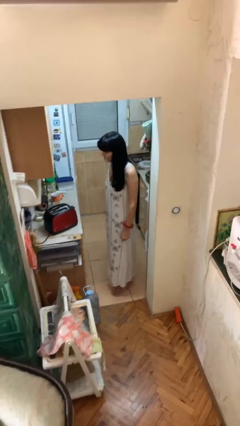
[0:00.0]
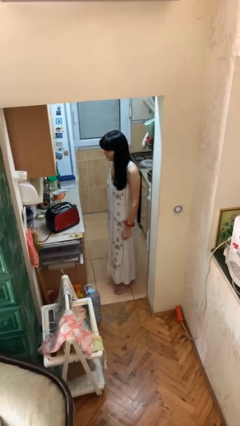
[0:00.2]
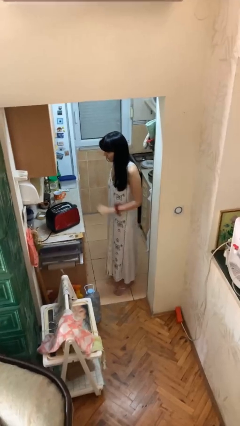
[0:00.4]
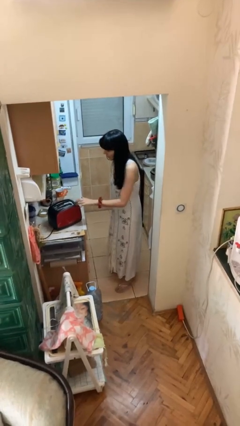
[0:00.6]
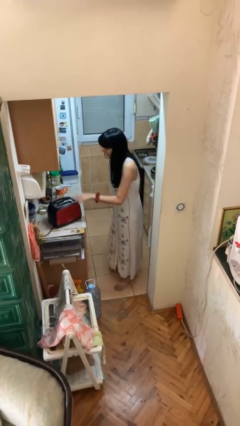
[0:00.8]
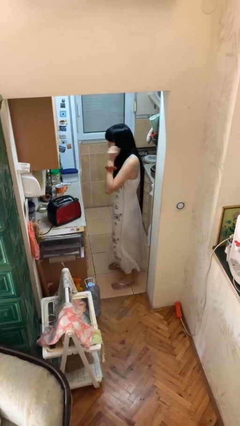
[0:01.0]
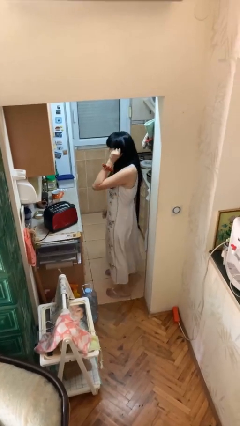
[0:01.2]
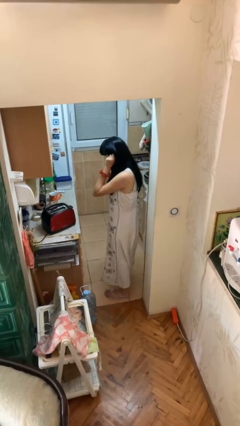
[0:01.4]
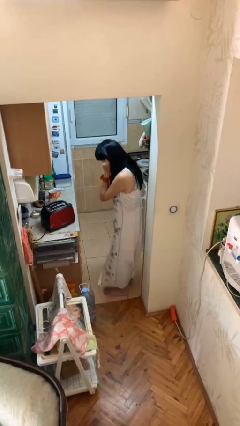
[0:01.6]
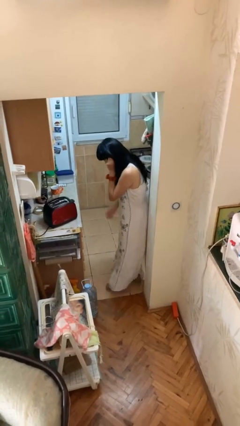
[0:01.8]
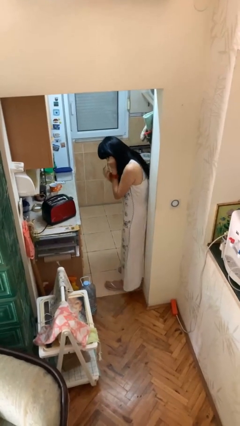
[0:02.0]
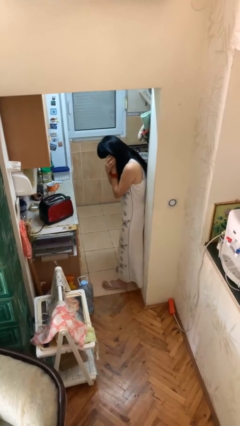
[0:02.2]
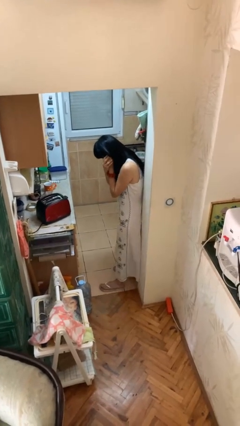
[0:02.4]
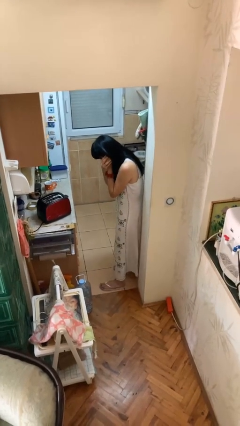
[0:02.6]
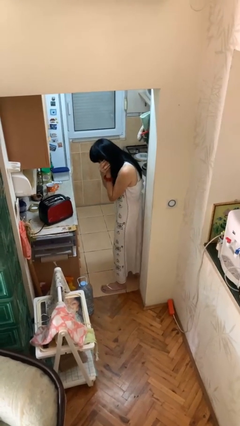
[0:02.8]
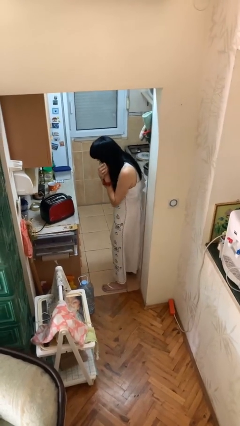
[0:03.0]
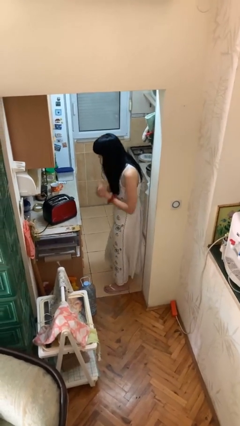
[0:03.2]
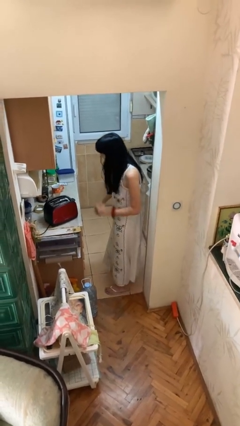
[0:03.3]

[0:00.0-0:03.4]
person burns hand

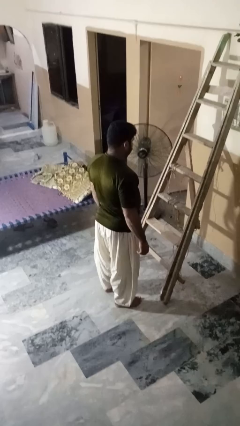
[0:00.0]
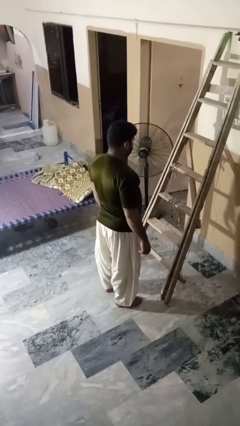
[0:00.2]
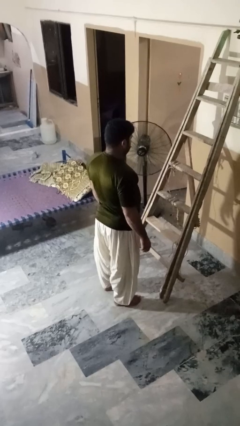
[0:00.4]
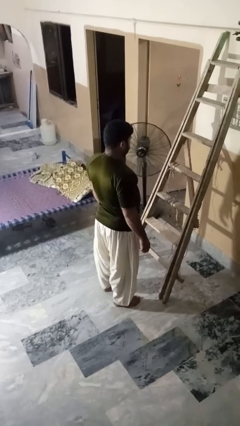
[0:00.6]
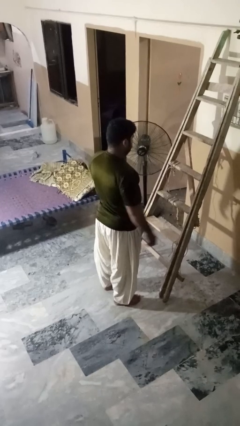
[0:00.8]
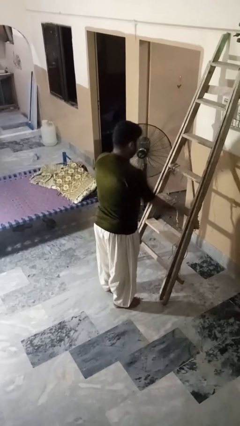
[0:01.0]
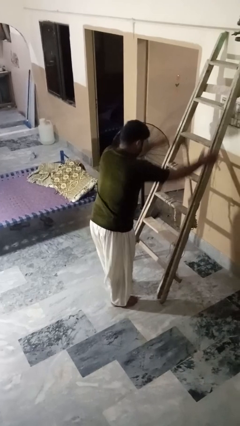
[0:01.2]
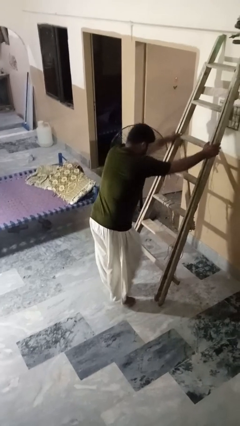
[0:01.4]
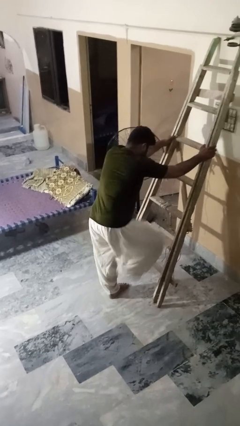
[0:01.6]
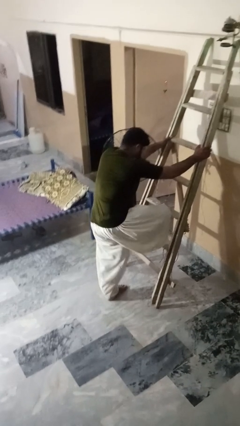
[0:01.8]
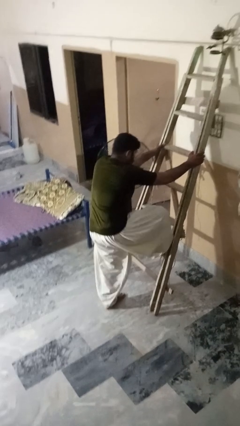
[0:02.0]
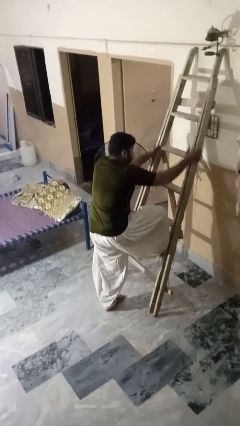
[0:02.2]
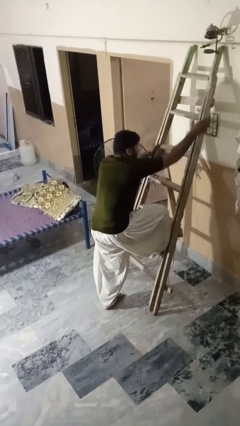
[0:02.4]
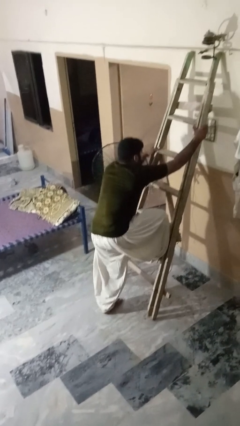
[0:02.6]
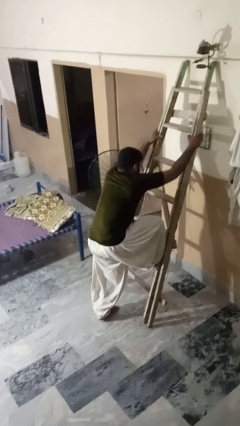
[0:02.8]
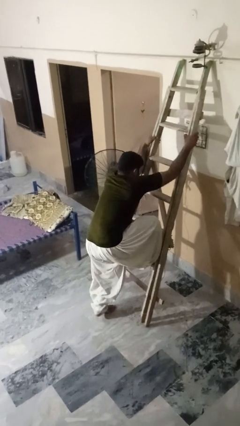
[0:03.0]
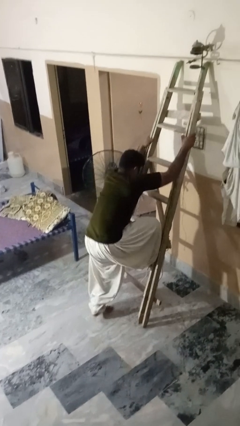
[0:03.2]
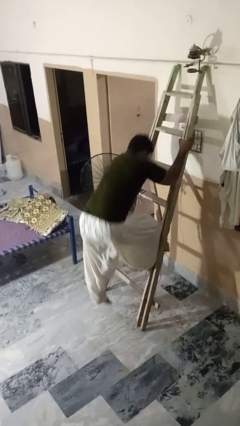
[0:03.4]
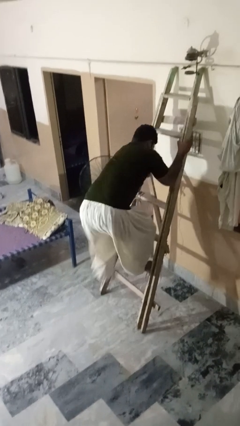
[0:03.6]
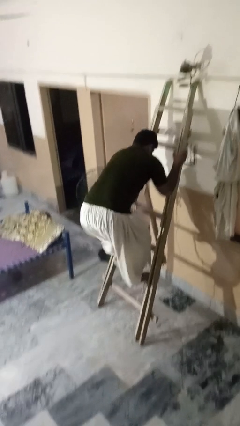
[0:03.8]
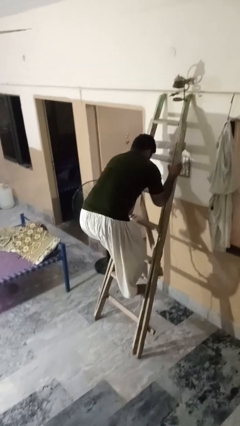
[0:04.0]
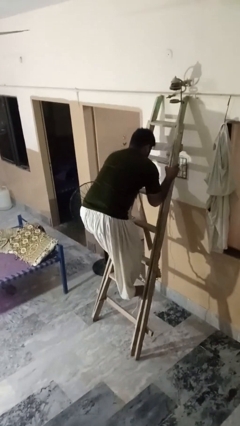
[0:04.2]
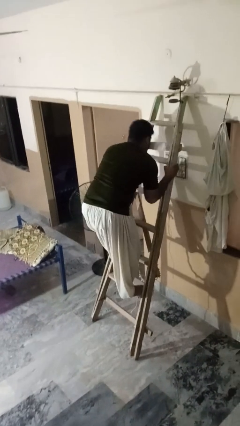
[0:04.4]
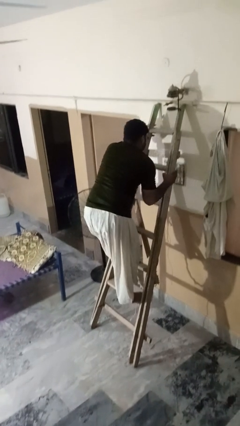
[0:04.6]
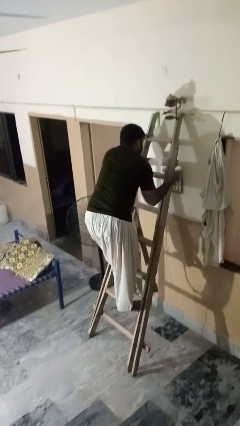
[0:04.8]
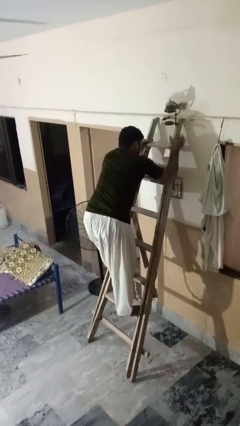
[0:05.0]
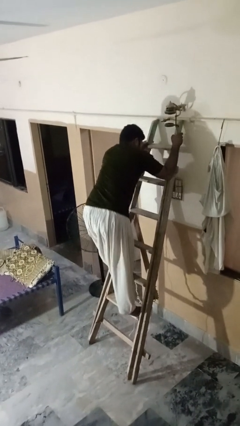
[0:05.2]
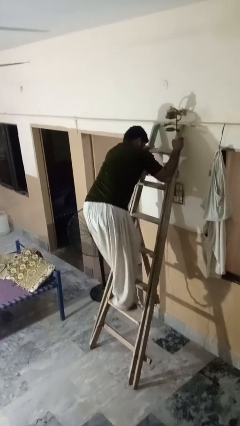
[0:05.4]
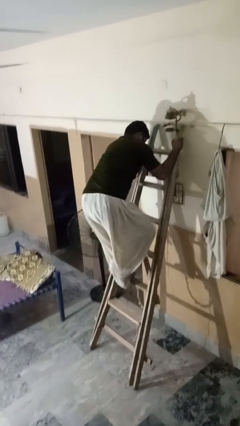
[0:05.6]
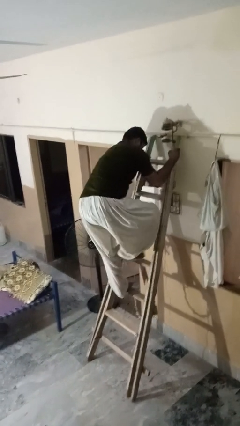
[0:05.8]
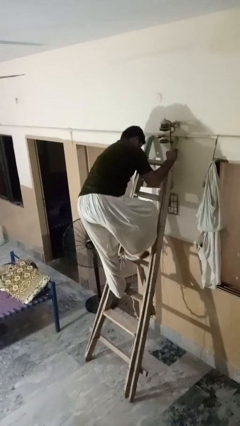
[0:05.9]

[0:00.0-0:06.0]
person climbs up ladder

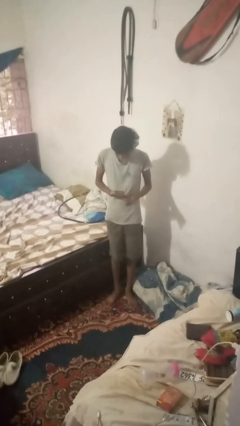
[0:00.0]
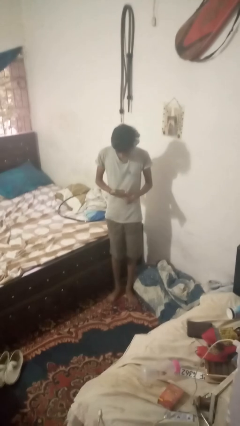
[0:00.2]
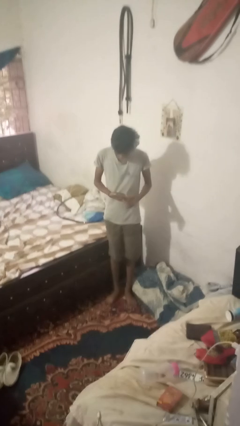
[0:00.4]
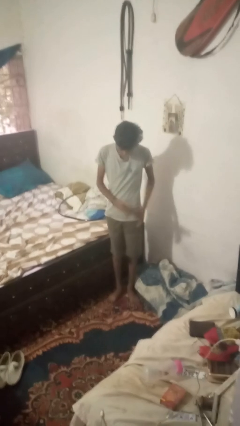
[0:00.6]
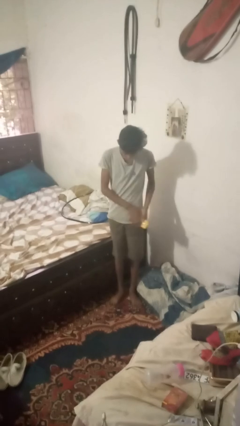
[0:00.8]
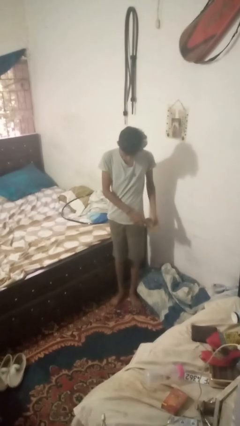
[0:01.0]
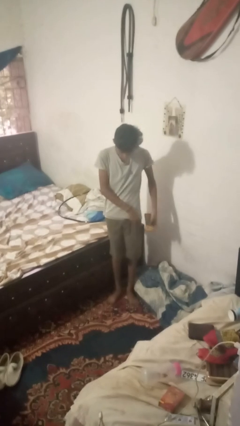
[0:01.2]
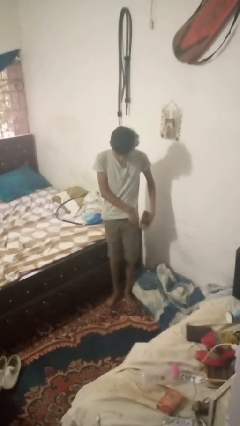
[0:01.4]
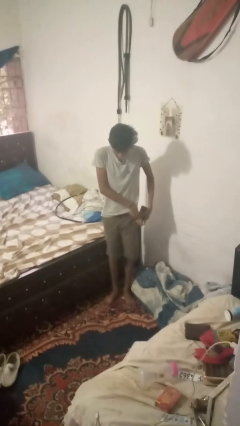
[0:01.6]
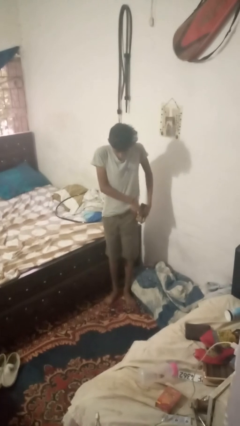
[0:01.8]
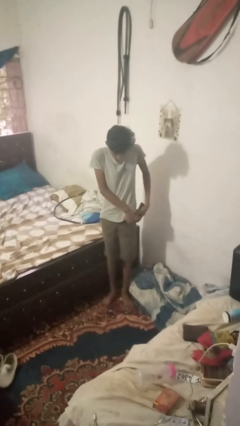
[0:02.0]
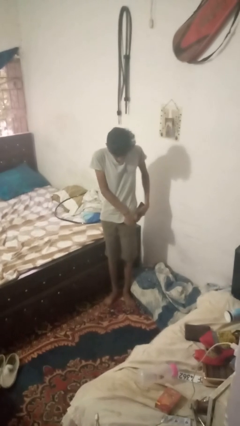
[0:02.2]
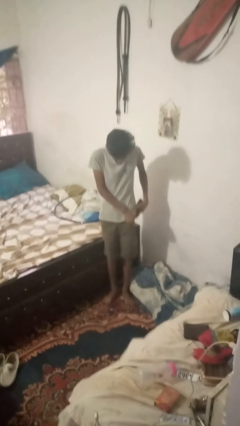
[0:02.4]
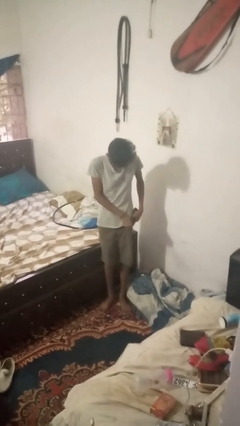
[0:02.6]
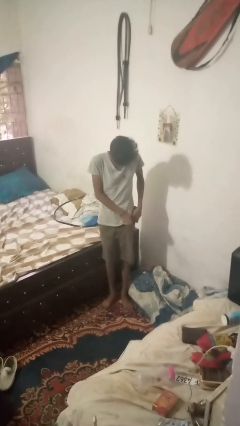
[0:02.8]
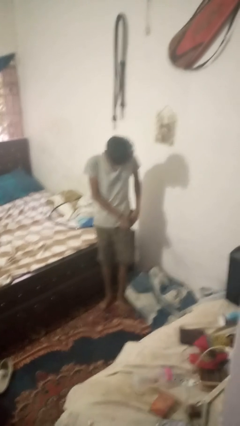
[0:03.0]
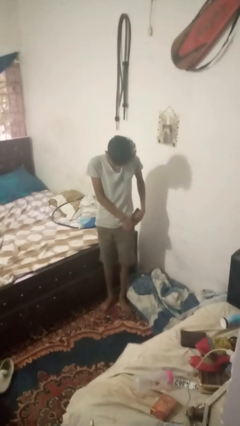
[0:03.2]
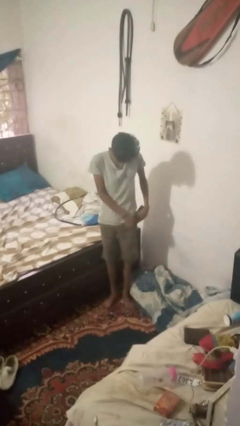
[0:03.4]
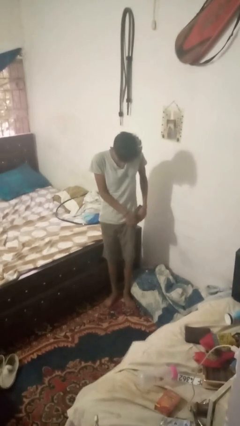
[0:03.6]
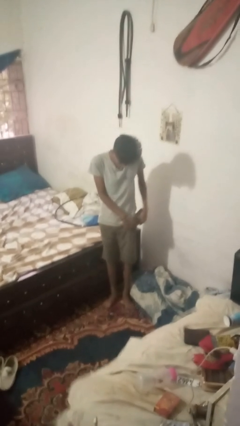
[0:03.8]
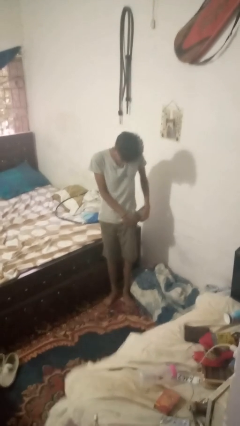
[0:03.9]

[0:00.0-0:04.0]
person puts phone into pocket

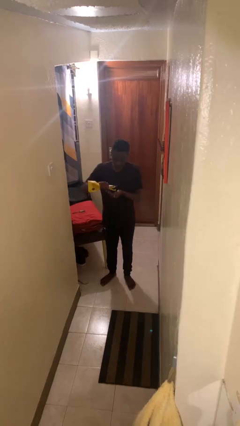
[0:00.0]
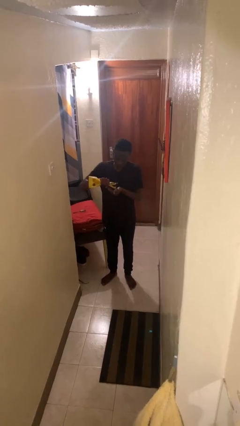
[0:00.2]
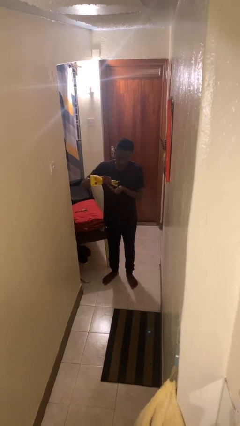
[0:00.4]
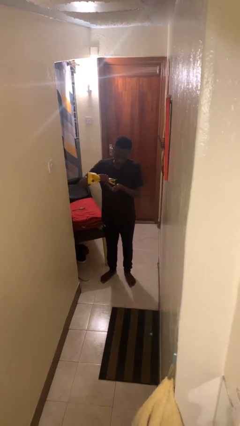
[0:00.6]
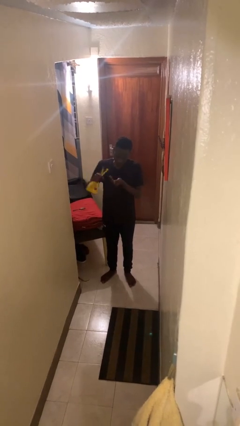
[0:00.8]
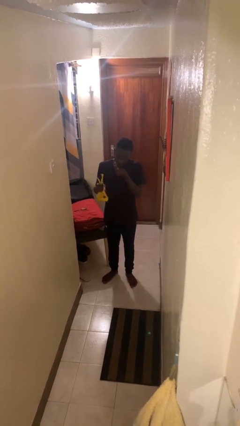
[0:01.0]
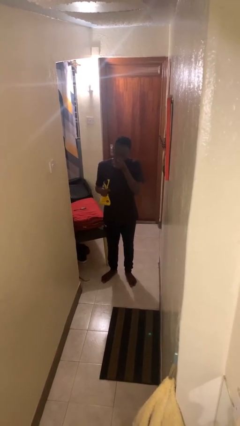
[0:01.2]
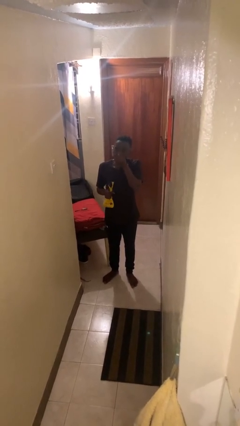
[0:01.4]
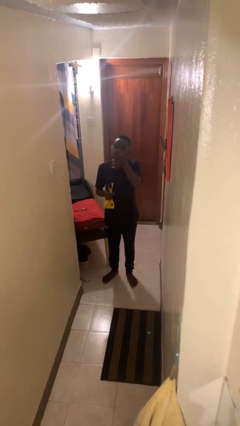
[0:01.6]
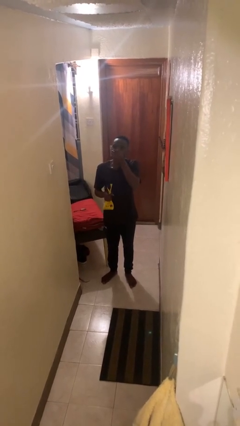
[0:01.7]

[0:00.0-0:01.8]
person eats snack from bag

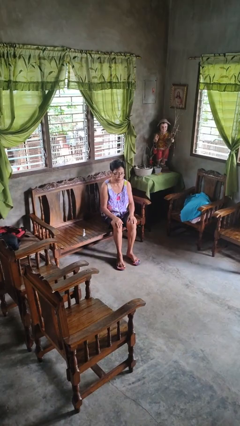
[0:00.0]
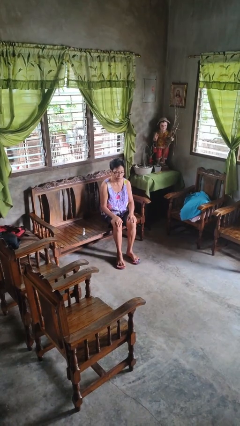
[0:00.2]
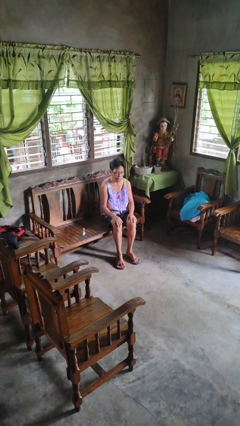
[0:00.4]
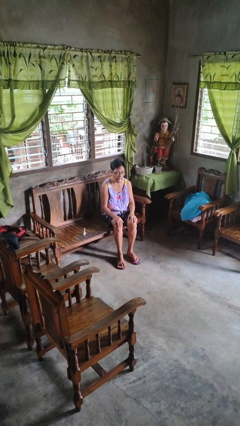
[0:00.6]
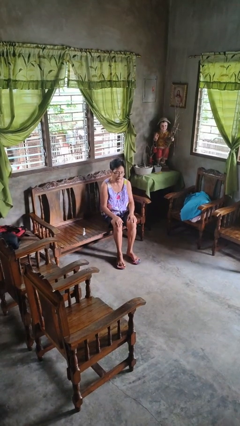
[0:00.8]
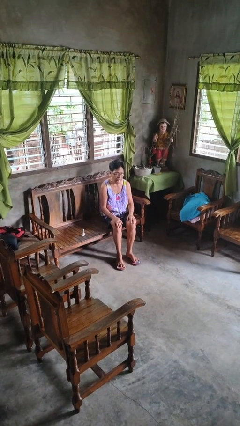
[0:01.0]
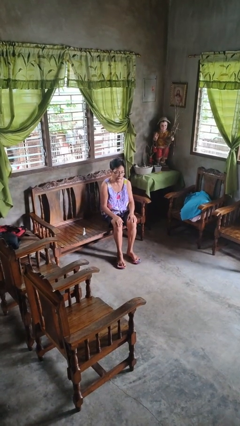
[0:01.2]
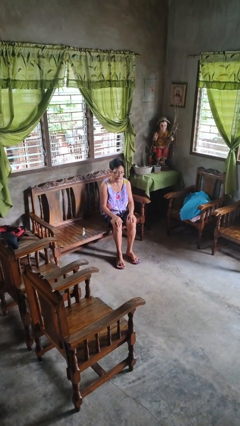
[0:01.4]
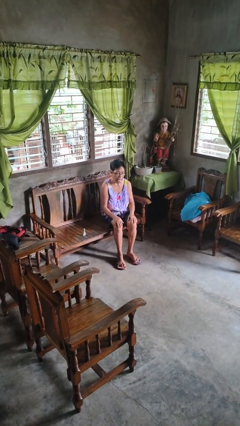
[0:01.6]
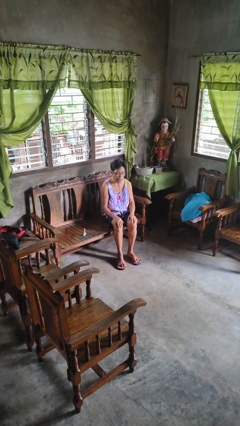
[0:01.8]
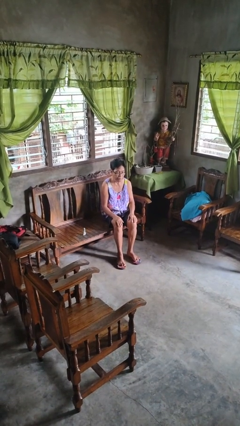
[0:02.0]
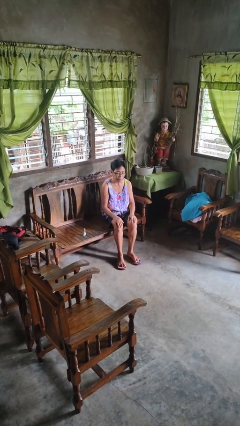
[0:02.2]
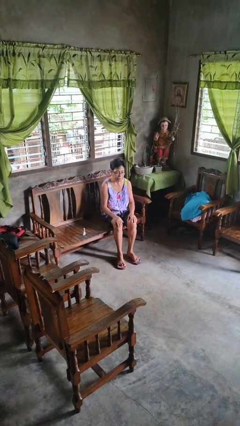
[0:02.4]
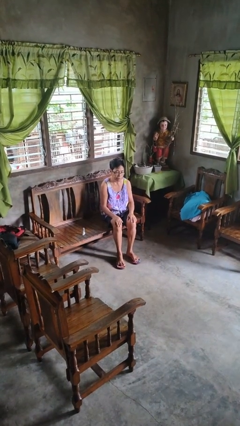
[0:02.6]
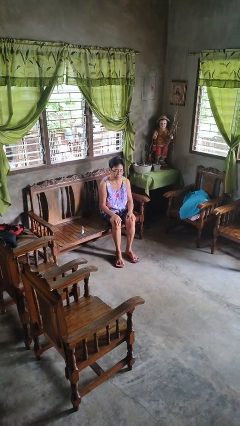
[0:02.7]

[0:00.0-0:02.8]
person sticks out tongue
